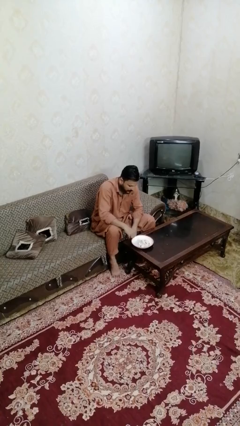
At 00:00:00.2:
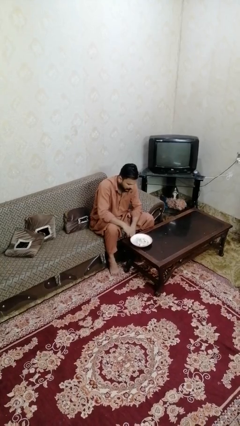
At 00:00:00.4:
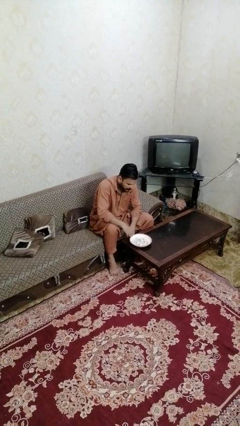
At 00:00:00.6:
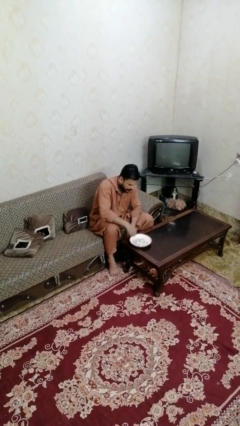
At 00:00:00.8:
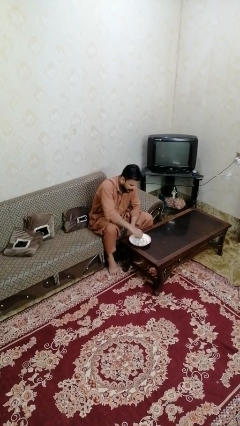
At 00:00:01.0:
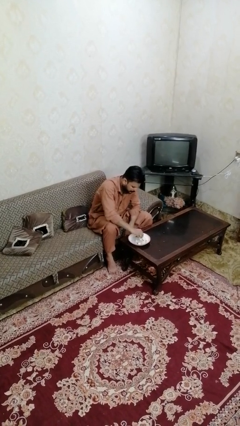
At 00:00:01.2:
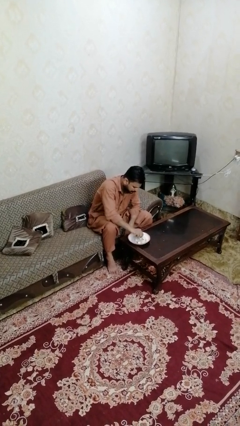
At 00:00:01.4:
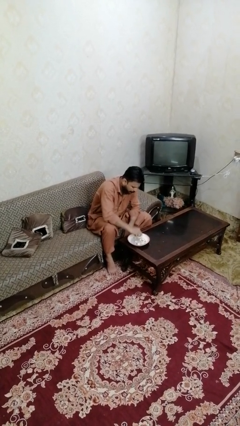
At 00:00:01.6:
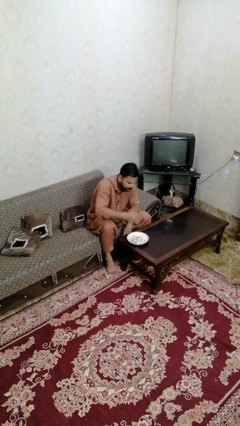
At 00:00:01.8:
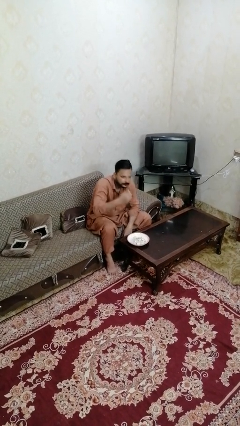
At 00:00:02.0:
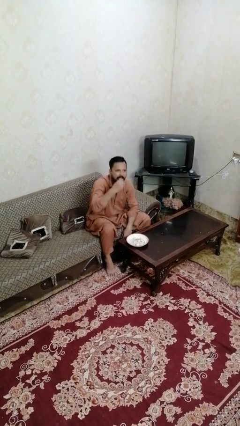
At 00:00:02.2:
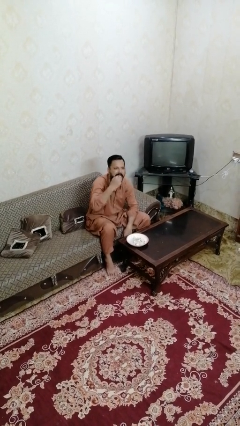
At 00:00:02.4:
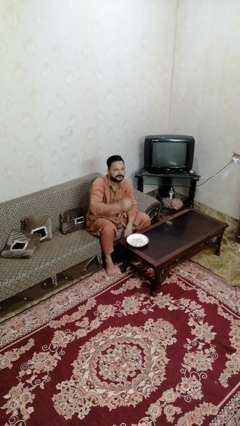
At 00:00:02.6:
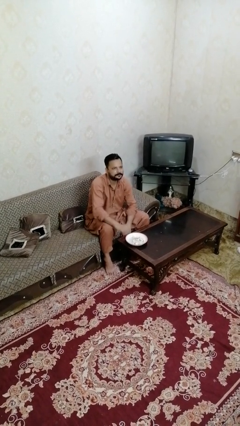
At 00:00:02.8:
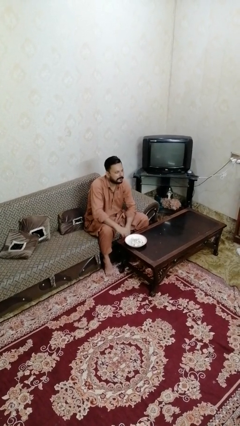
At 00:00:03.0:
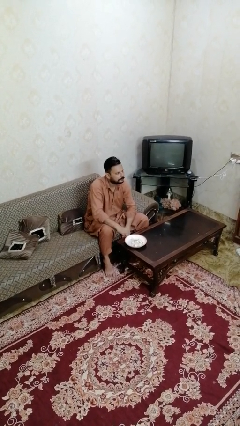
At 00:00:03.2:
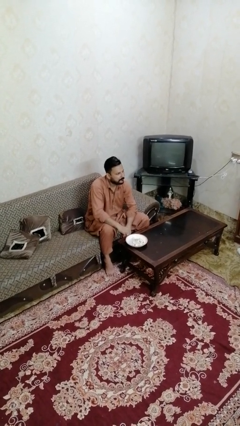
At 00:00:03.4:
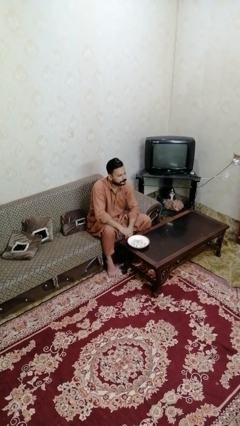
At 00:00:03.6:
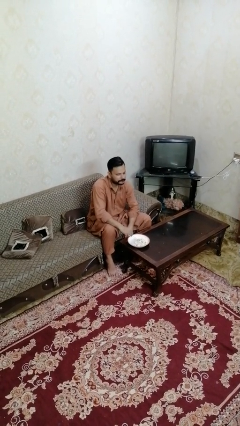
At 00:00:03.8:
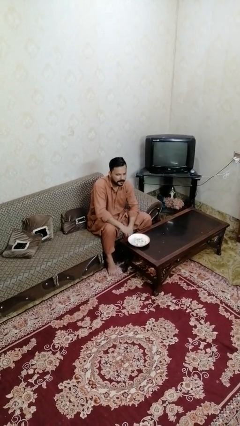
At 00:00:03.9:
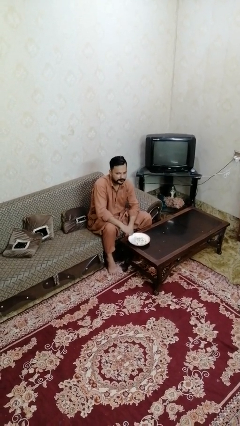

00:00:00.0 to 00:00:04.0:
person eats with hands

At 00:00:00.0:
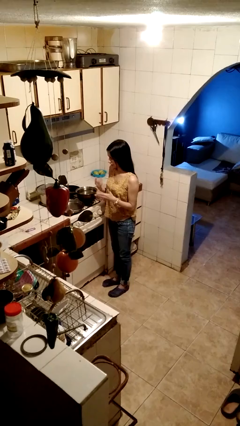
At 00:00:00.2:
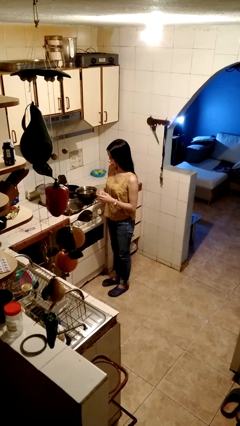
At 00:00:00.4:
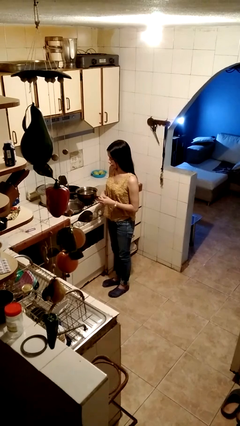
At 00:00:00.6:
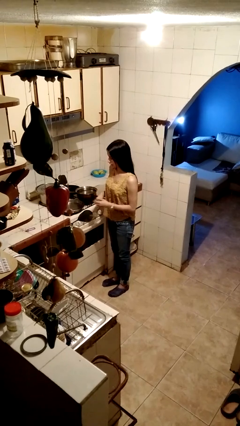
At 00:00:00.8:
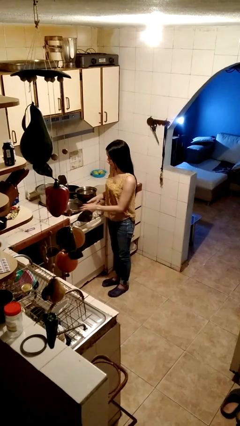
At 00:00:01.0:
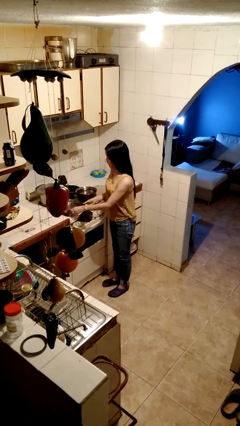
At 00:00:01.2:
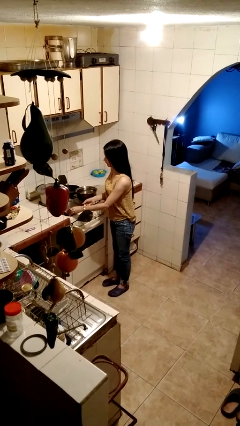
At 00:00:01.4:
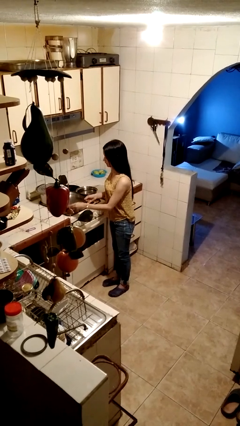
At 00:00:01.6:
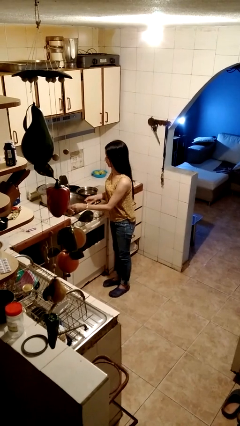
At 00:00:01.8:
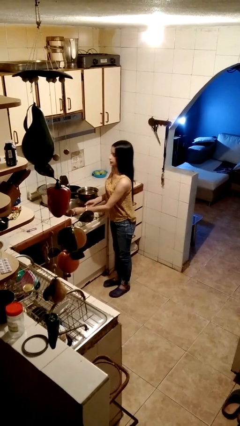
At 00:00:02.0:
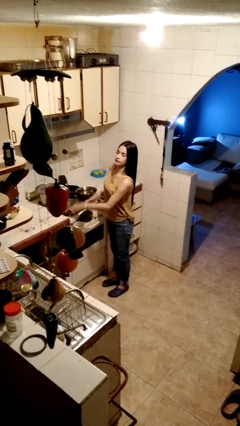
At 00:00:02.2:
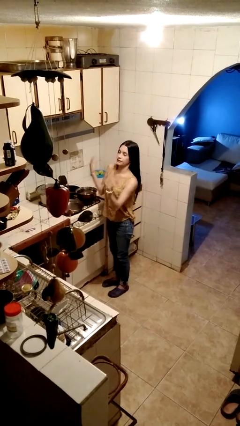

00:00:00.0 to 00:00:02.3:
person burns hand

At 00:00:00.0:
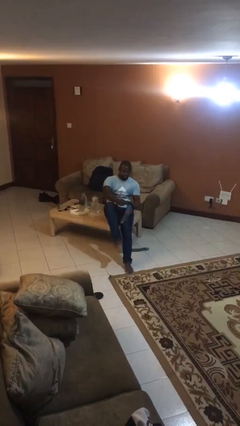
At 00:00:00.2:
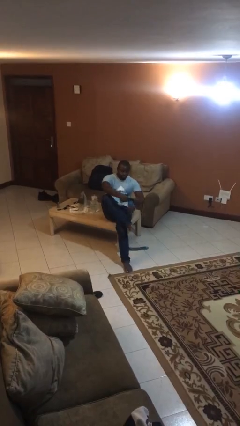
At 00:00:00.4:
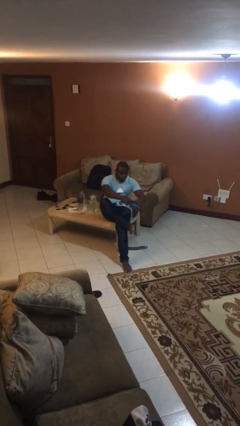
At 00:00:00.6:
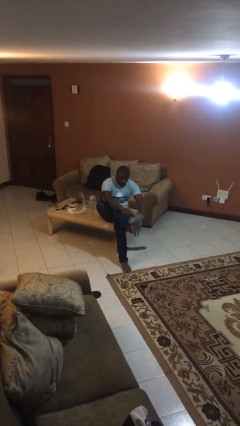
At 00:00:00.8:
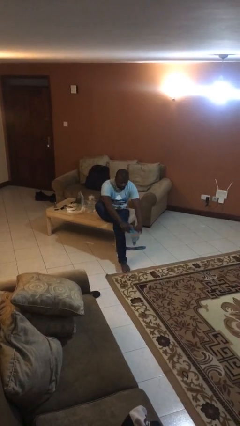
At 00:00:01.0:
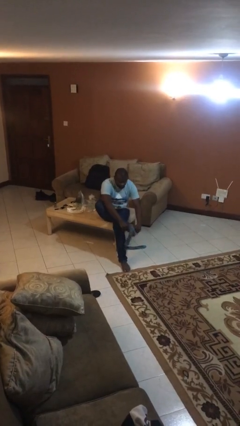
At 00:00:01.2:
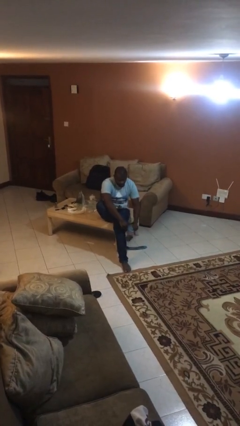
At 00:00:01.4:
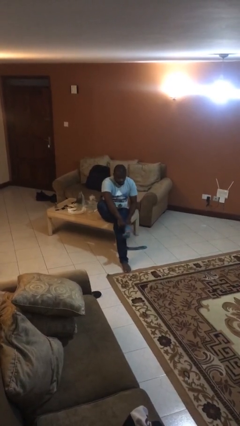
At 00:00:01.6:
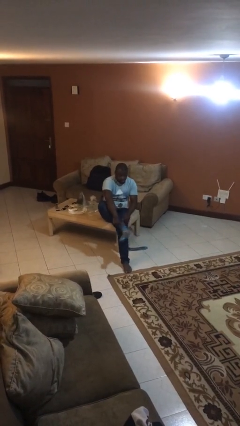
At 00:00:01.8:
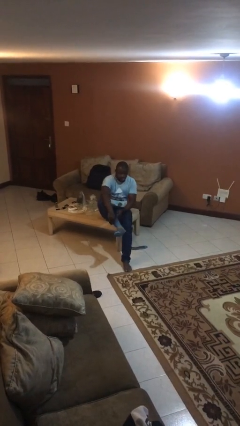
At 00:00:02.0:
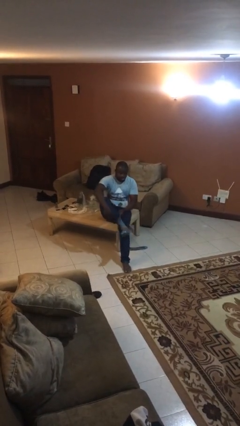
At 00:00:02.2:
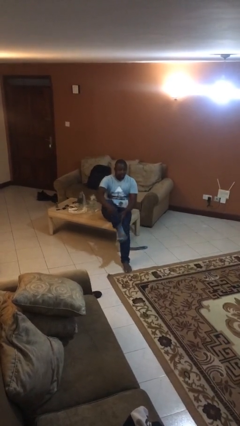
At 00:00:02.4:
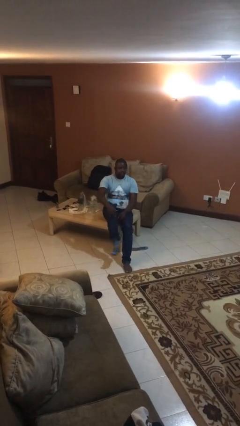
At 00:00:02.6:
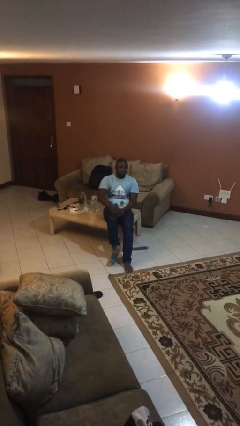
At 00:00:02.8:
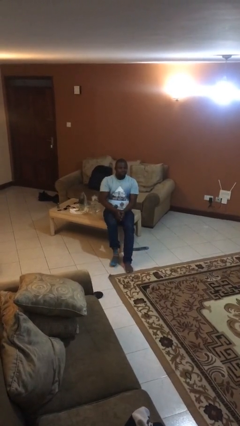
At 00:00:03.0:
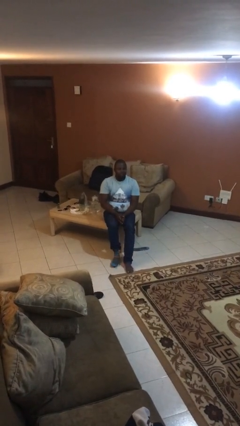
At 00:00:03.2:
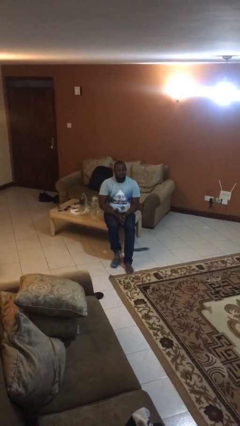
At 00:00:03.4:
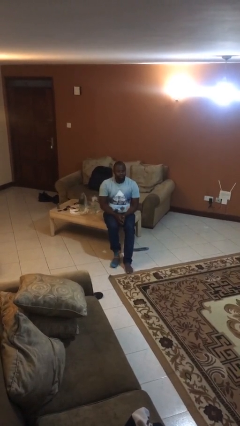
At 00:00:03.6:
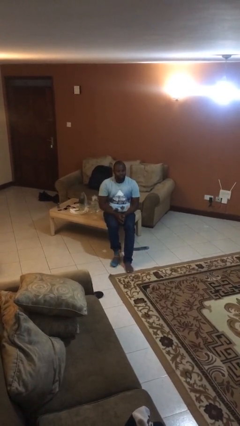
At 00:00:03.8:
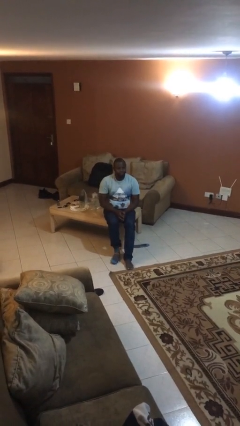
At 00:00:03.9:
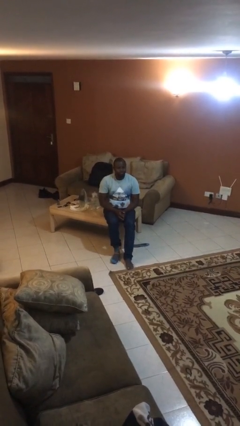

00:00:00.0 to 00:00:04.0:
person puts on socks

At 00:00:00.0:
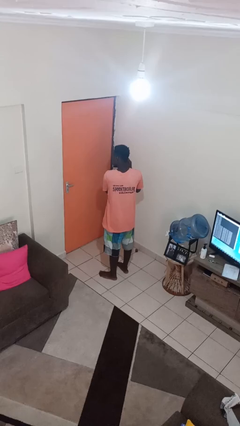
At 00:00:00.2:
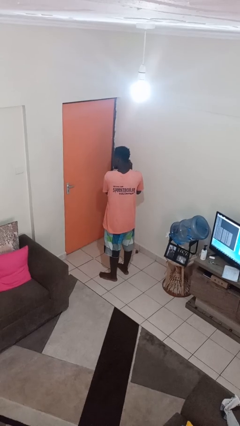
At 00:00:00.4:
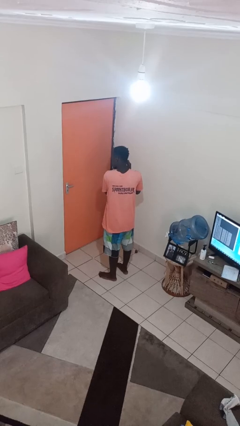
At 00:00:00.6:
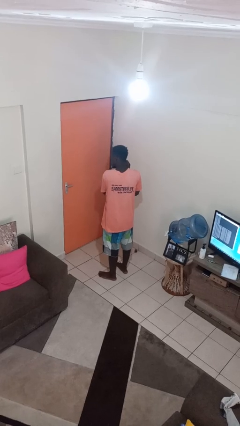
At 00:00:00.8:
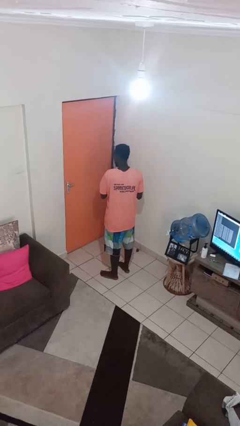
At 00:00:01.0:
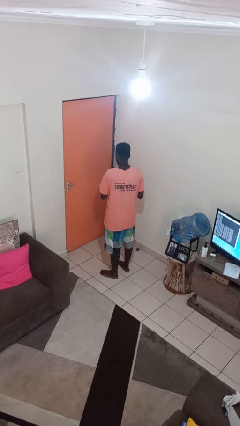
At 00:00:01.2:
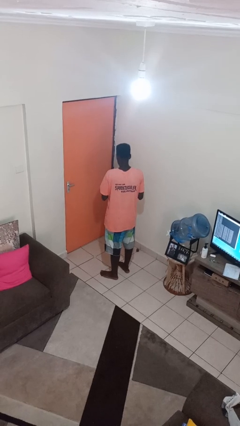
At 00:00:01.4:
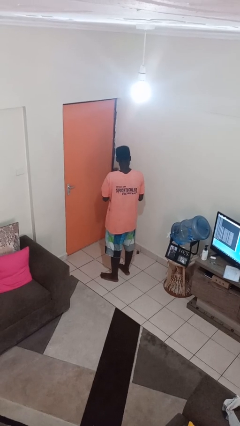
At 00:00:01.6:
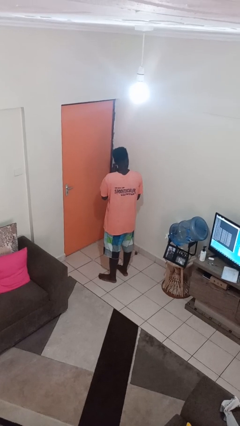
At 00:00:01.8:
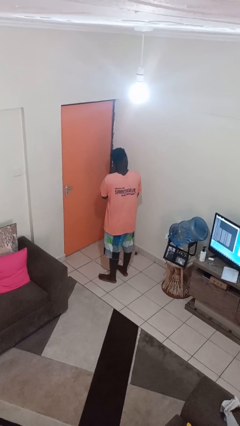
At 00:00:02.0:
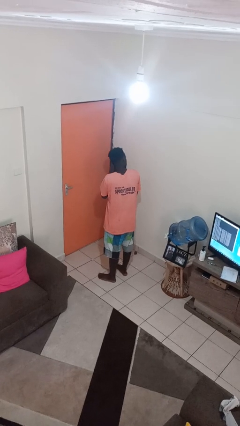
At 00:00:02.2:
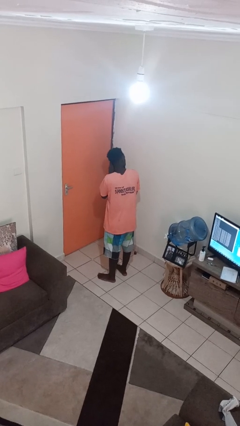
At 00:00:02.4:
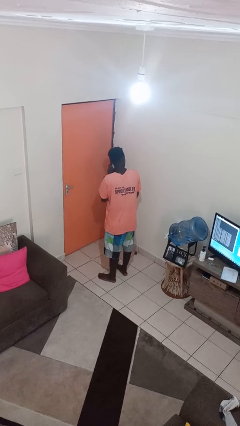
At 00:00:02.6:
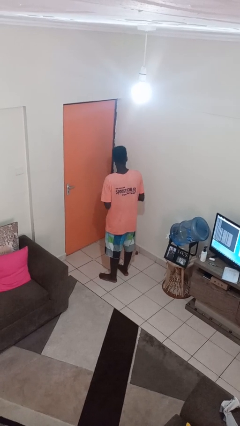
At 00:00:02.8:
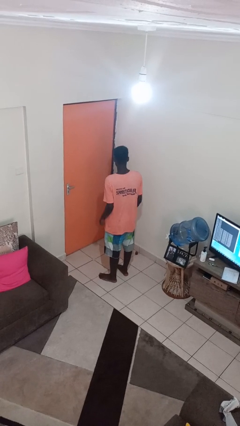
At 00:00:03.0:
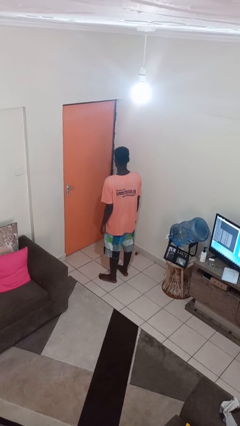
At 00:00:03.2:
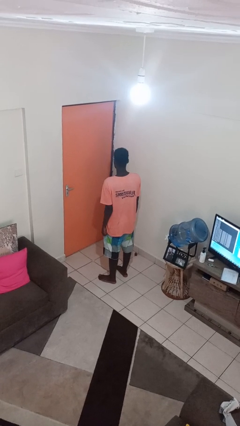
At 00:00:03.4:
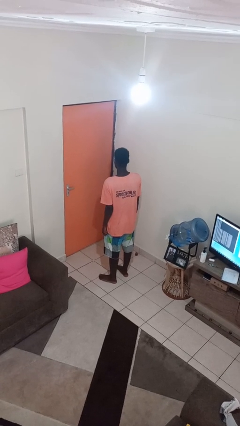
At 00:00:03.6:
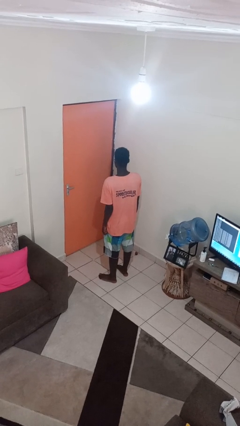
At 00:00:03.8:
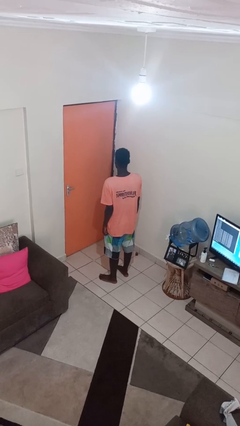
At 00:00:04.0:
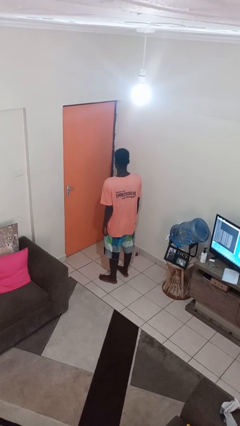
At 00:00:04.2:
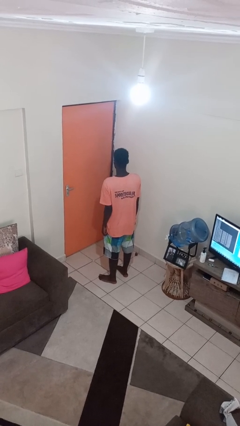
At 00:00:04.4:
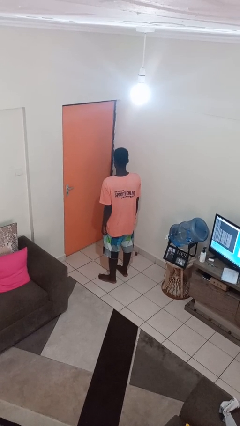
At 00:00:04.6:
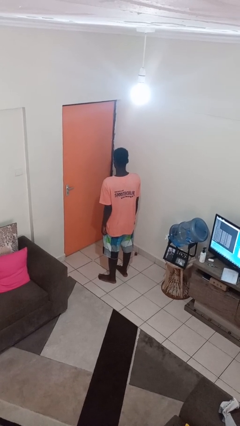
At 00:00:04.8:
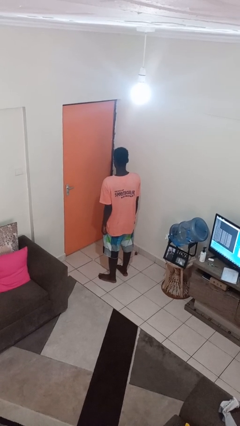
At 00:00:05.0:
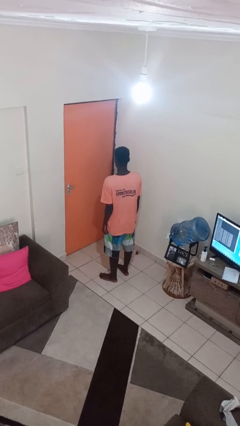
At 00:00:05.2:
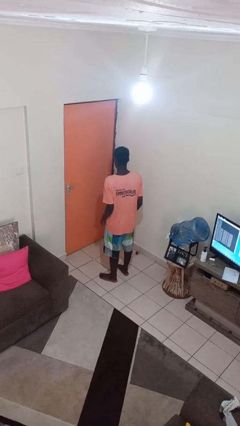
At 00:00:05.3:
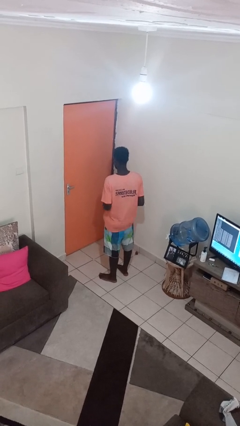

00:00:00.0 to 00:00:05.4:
person puts on earrings

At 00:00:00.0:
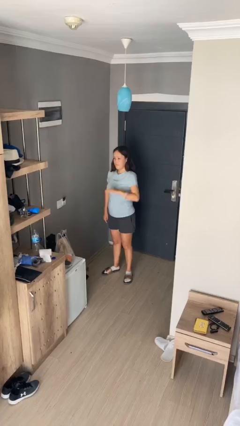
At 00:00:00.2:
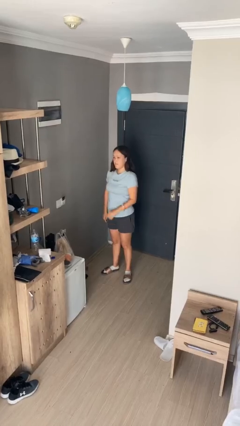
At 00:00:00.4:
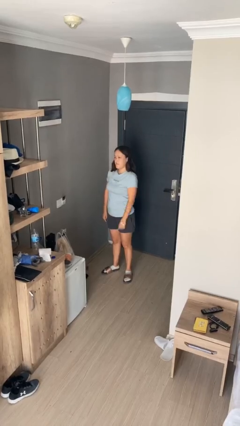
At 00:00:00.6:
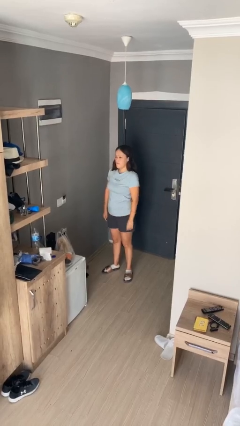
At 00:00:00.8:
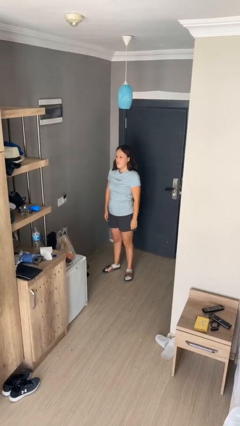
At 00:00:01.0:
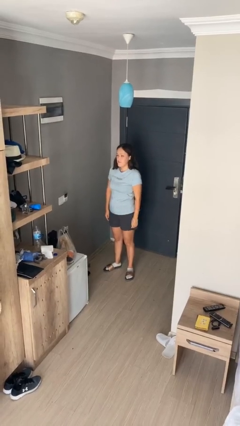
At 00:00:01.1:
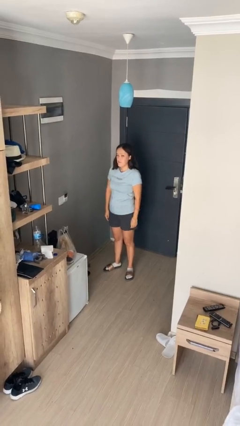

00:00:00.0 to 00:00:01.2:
person gestures swipe down
